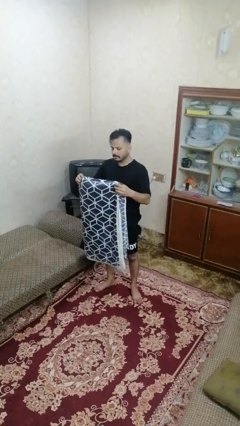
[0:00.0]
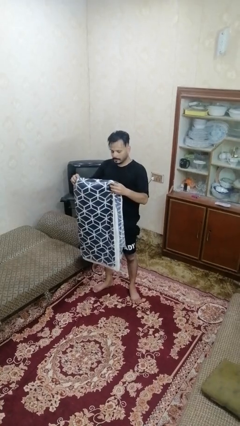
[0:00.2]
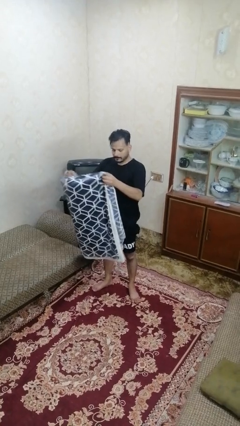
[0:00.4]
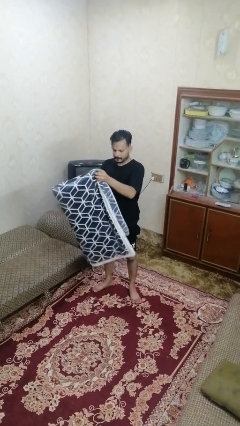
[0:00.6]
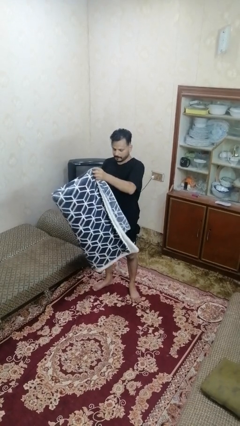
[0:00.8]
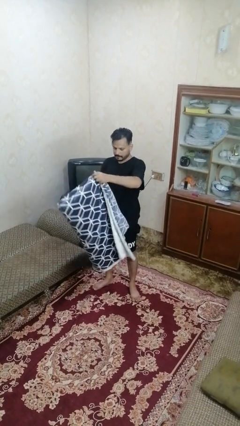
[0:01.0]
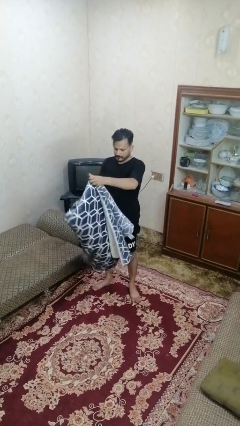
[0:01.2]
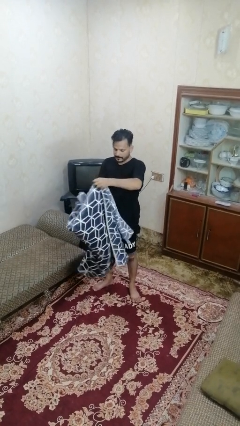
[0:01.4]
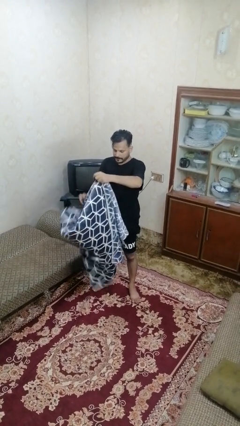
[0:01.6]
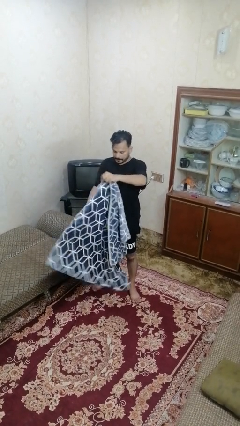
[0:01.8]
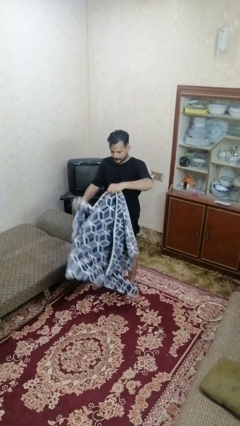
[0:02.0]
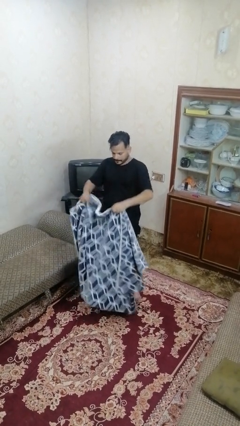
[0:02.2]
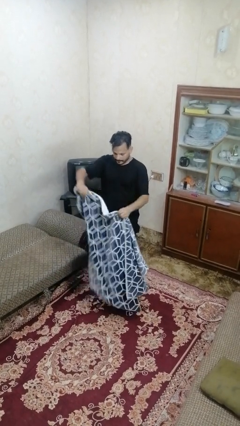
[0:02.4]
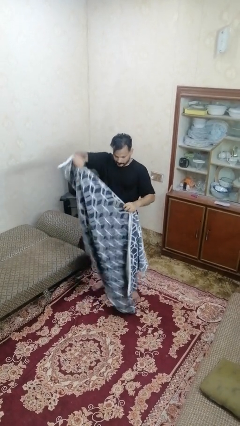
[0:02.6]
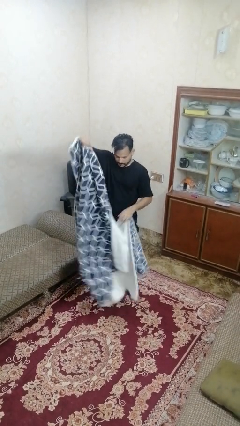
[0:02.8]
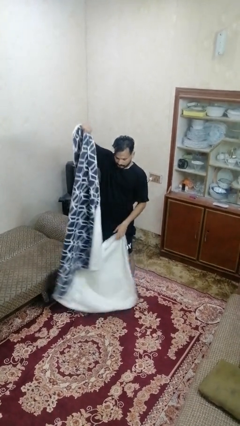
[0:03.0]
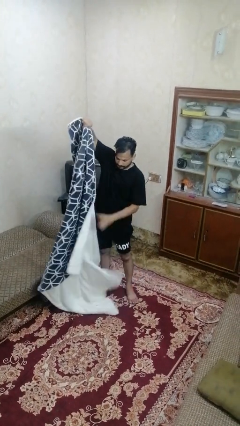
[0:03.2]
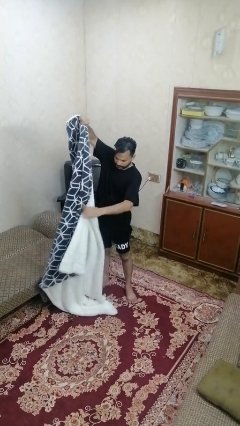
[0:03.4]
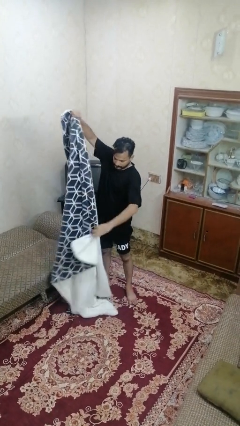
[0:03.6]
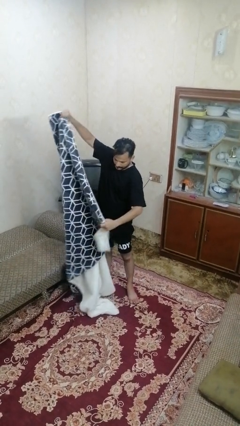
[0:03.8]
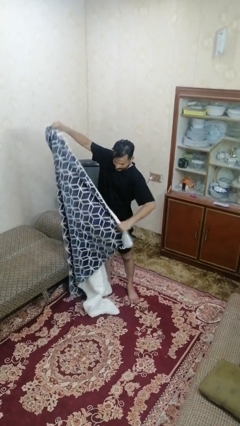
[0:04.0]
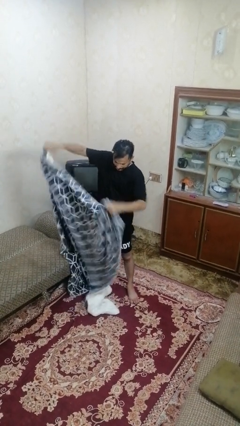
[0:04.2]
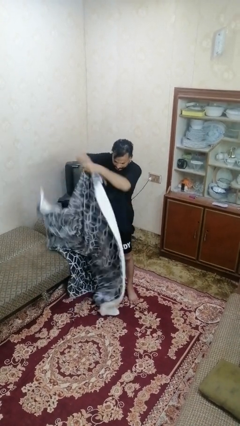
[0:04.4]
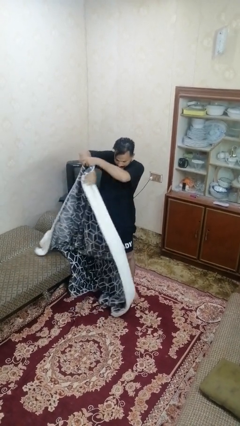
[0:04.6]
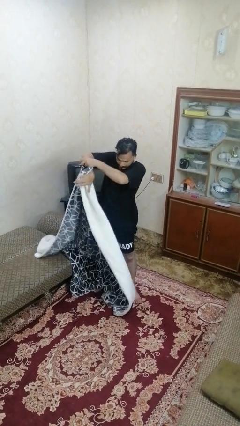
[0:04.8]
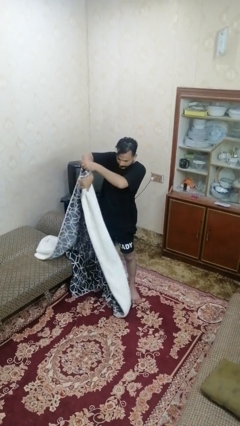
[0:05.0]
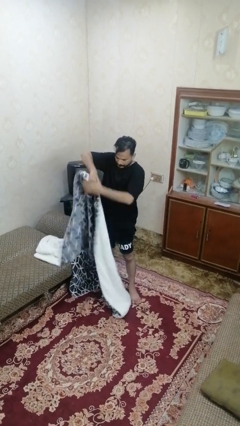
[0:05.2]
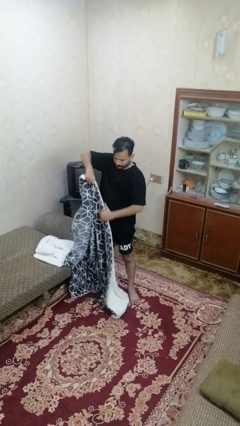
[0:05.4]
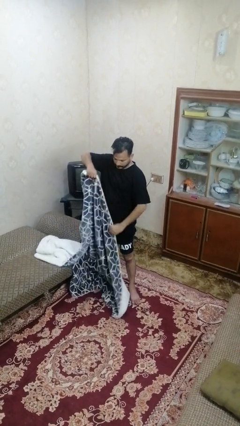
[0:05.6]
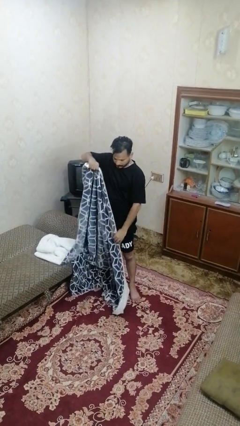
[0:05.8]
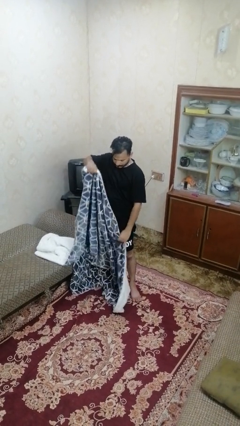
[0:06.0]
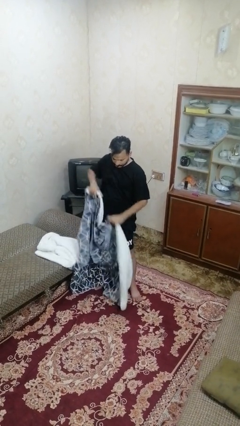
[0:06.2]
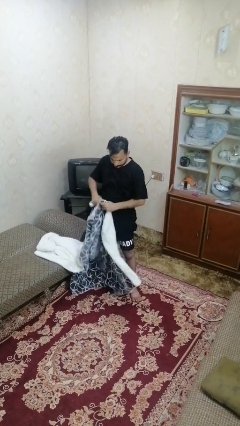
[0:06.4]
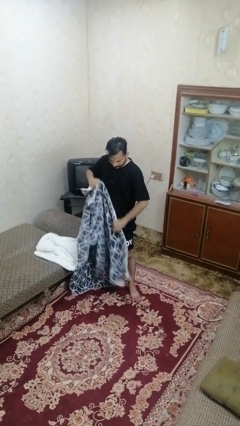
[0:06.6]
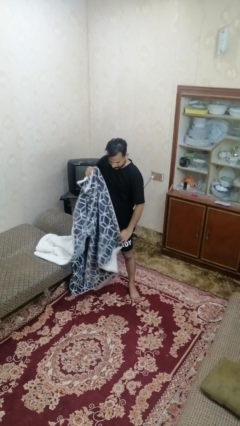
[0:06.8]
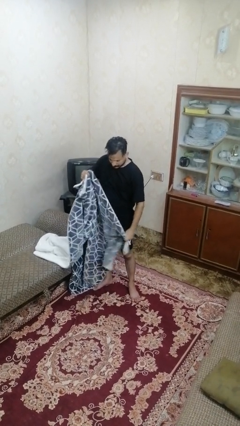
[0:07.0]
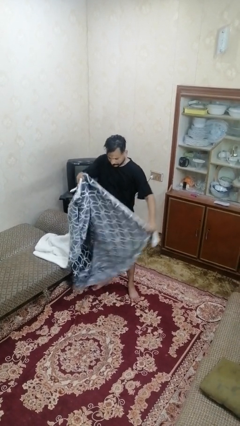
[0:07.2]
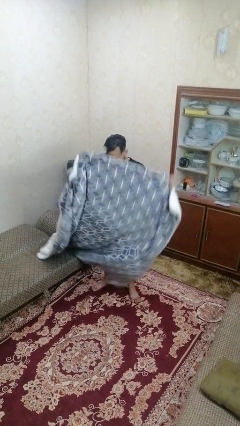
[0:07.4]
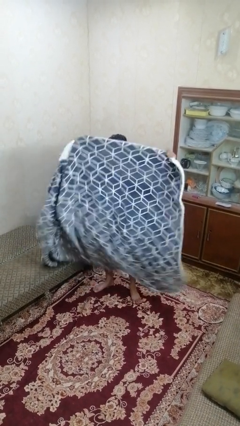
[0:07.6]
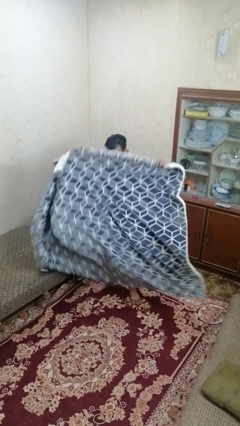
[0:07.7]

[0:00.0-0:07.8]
person unfolds blanket

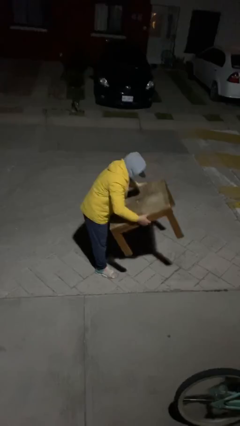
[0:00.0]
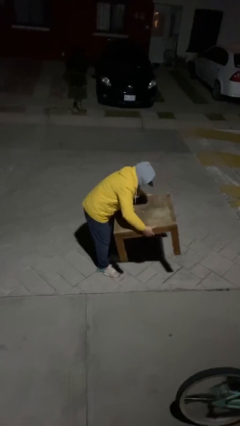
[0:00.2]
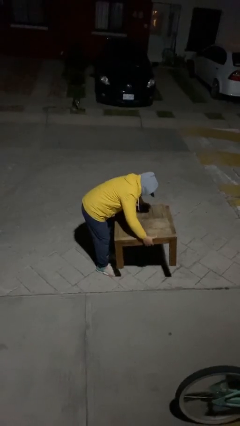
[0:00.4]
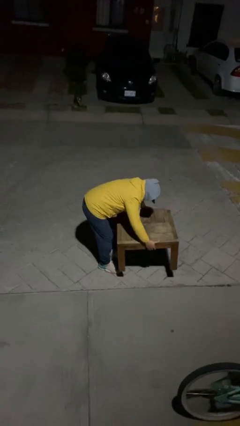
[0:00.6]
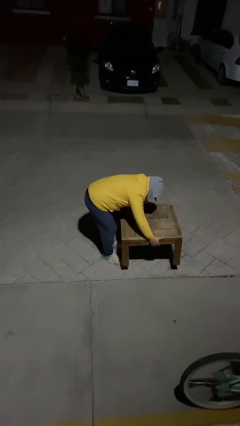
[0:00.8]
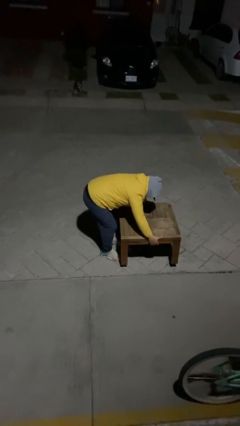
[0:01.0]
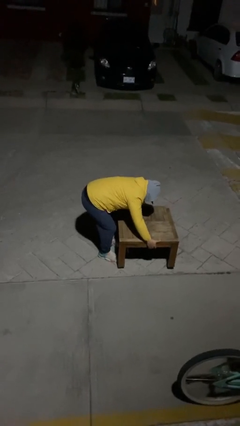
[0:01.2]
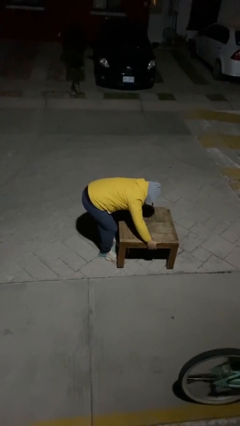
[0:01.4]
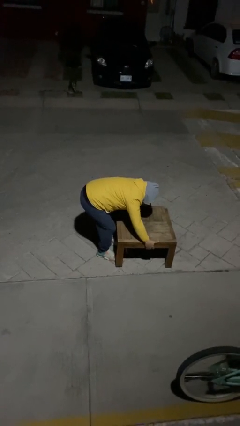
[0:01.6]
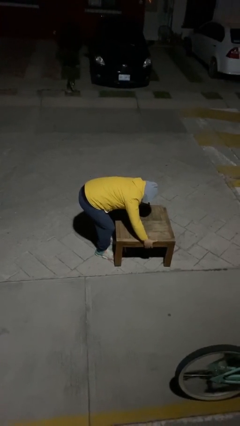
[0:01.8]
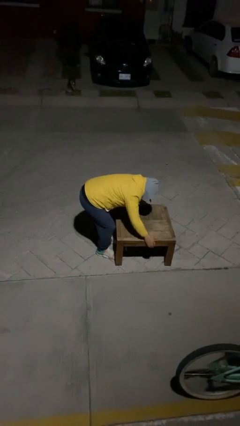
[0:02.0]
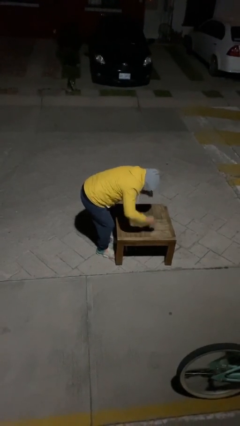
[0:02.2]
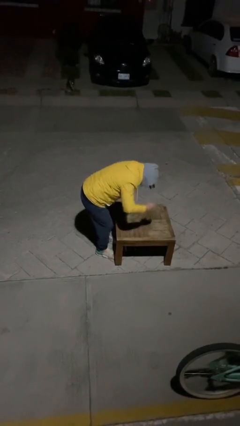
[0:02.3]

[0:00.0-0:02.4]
person puts down object on floor

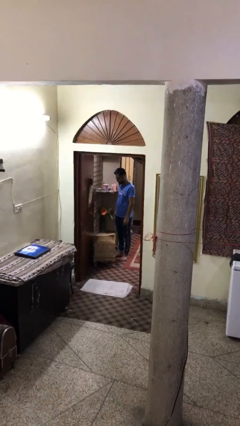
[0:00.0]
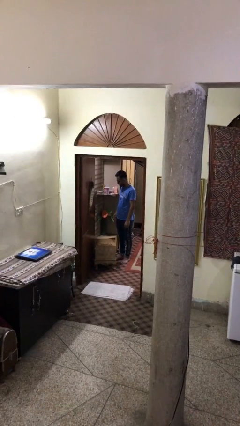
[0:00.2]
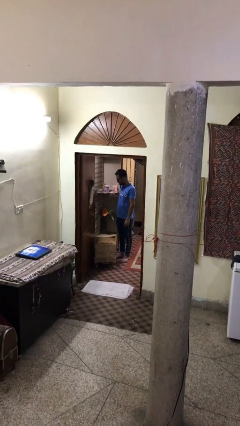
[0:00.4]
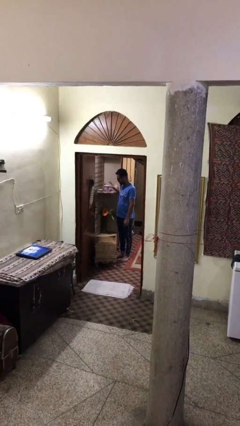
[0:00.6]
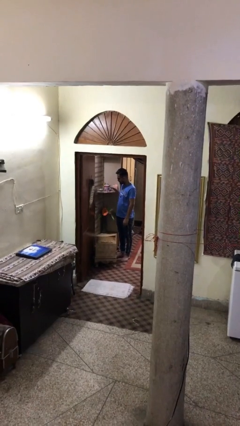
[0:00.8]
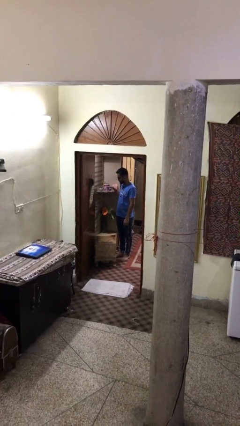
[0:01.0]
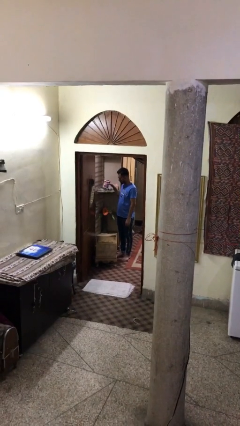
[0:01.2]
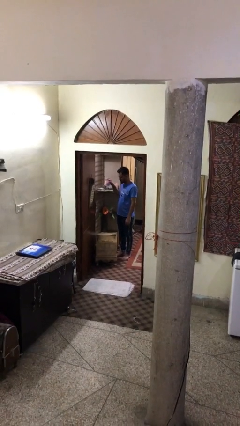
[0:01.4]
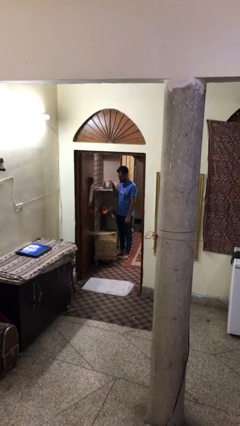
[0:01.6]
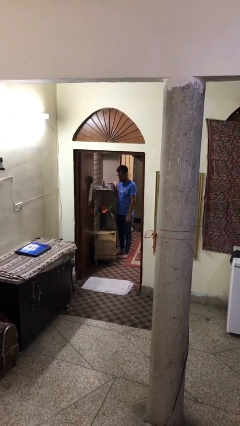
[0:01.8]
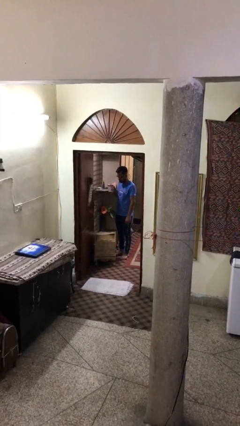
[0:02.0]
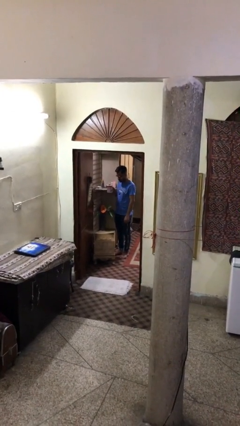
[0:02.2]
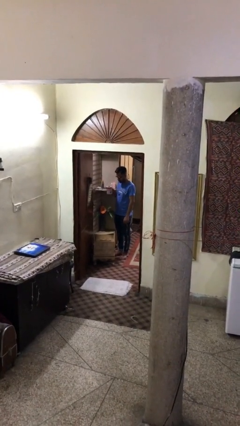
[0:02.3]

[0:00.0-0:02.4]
person picks up object from shelf

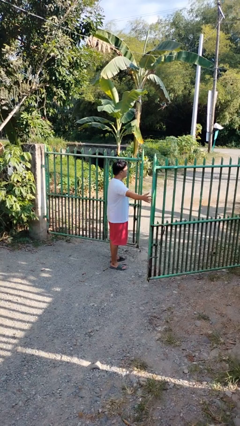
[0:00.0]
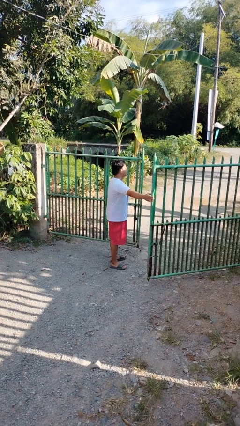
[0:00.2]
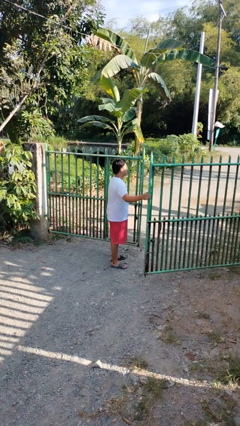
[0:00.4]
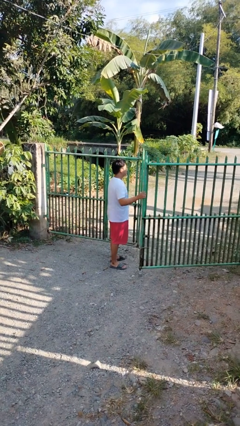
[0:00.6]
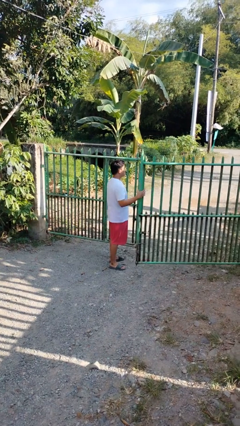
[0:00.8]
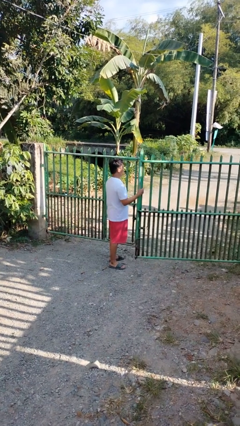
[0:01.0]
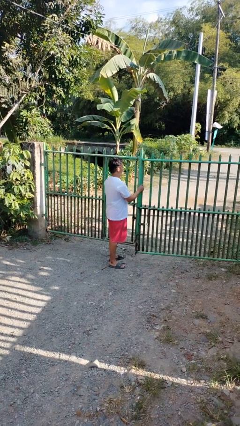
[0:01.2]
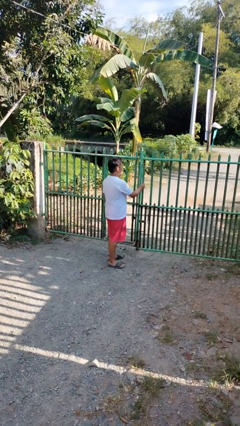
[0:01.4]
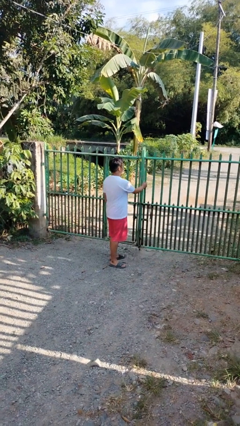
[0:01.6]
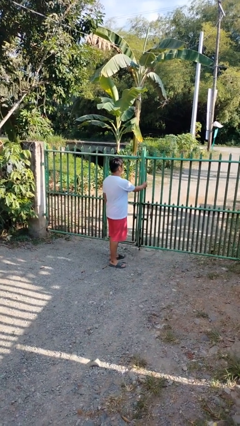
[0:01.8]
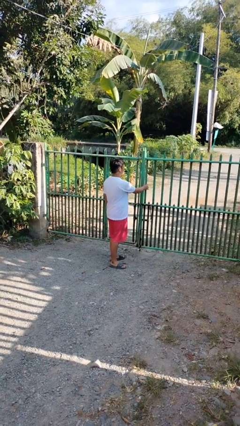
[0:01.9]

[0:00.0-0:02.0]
person closes gate

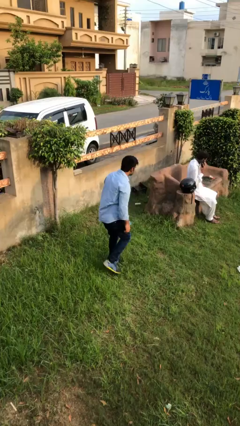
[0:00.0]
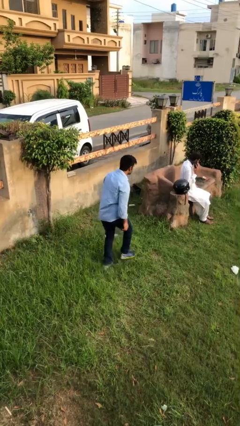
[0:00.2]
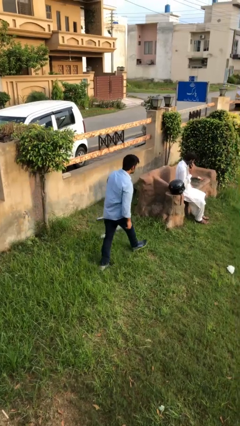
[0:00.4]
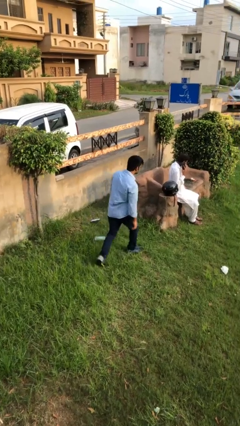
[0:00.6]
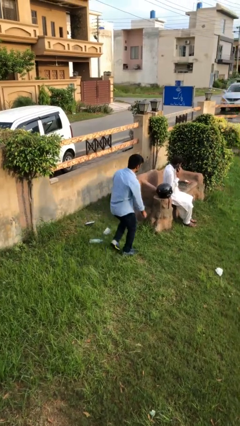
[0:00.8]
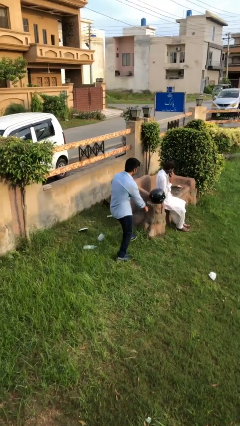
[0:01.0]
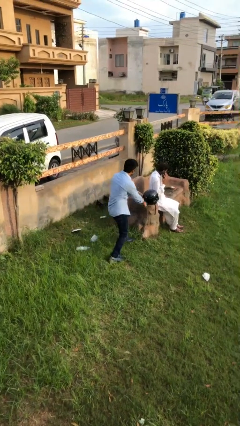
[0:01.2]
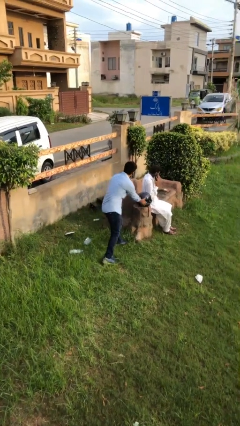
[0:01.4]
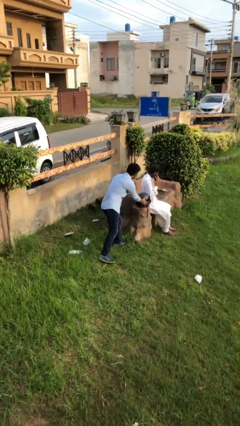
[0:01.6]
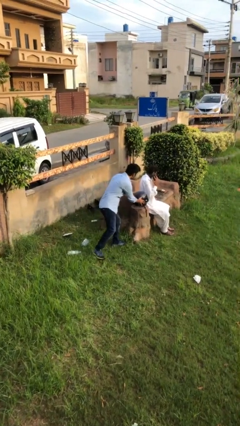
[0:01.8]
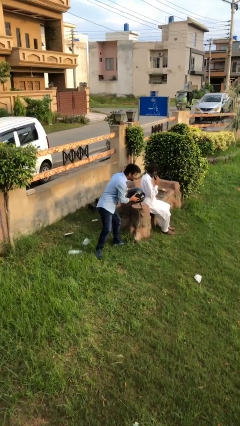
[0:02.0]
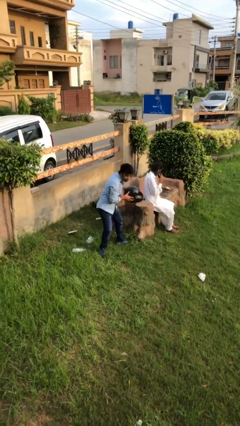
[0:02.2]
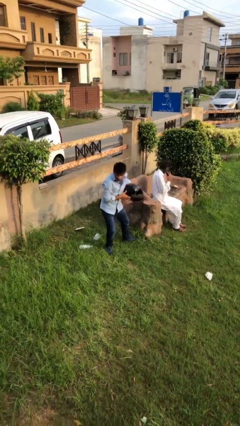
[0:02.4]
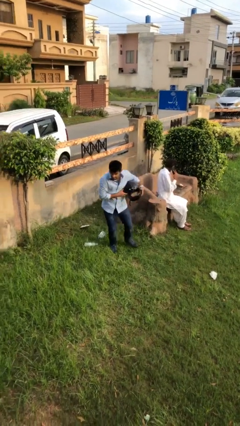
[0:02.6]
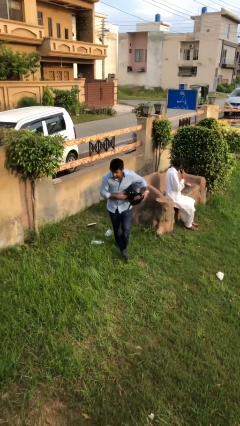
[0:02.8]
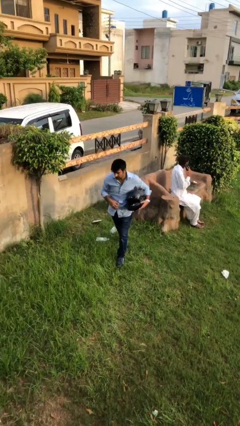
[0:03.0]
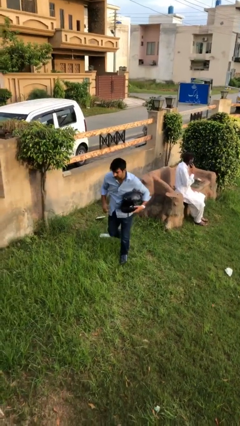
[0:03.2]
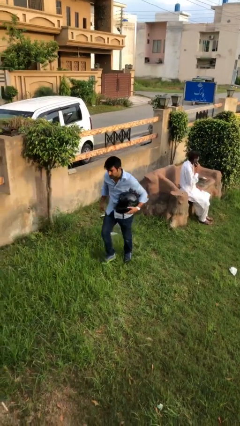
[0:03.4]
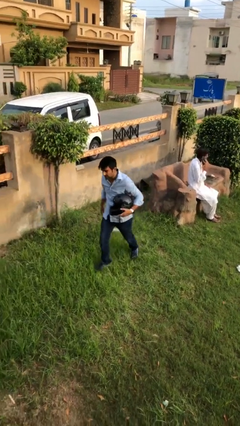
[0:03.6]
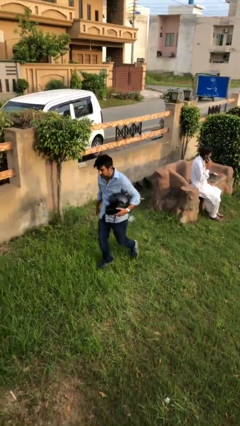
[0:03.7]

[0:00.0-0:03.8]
person steals object from person
